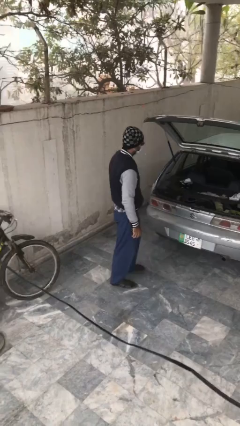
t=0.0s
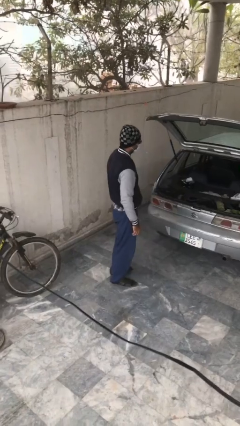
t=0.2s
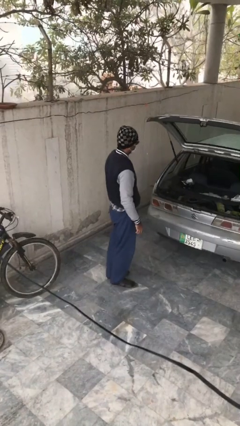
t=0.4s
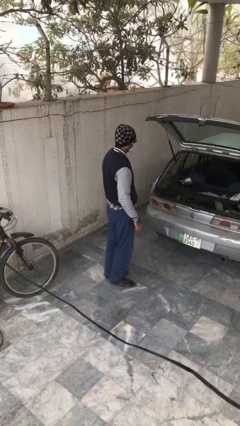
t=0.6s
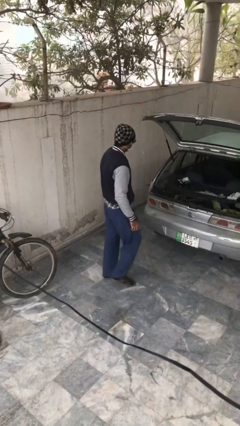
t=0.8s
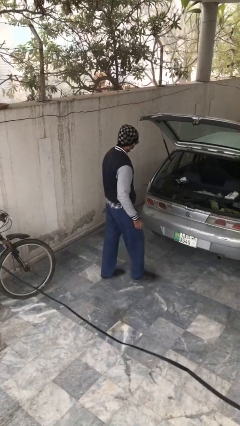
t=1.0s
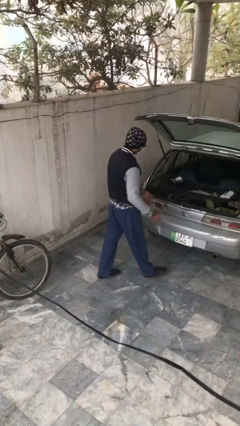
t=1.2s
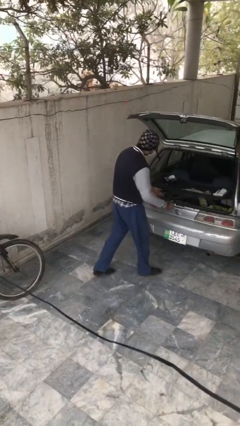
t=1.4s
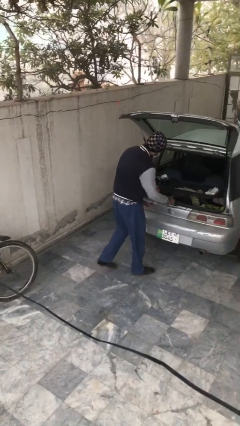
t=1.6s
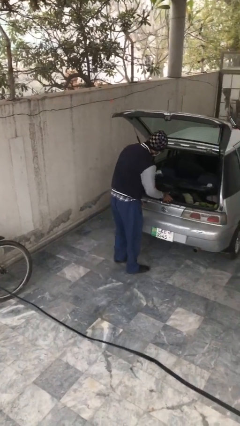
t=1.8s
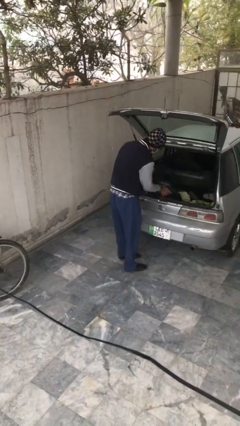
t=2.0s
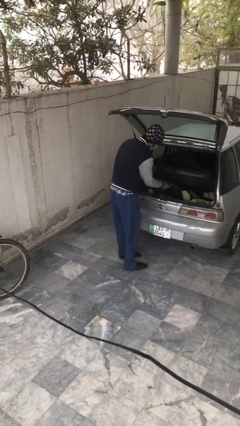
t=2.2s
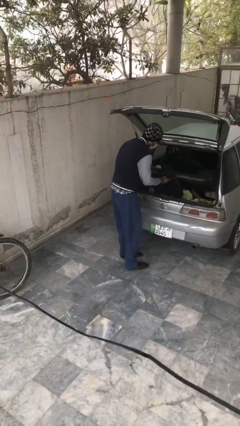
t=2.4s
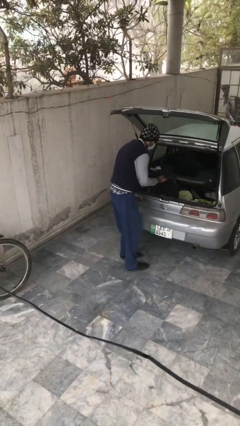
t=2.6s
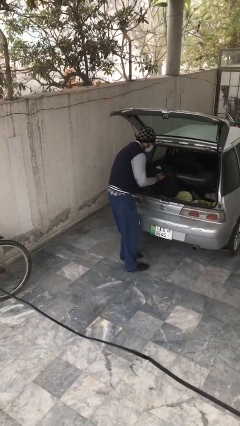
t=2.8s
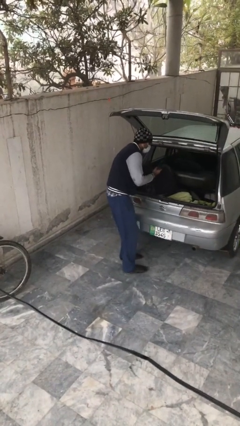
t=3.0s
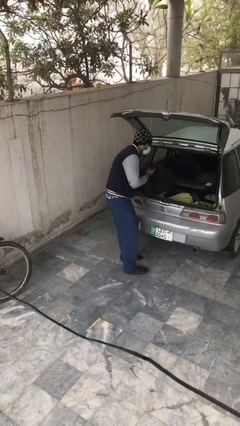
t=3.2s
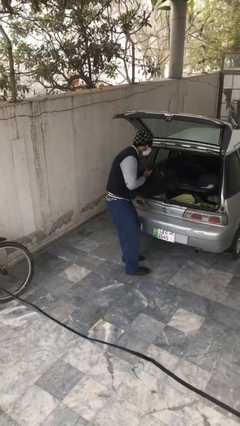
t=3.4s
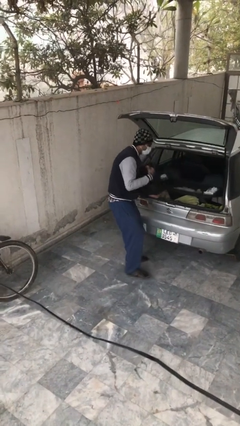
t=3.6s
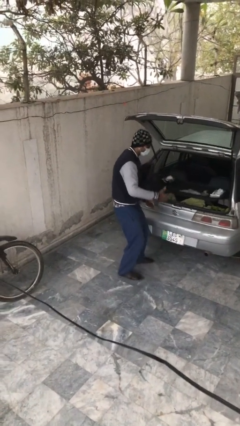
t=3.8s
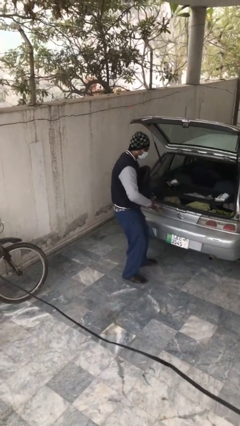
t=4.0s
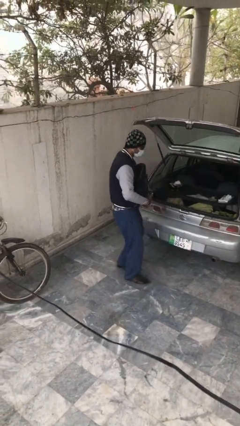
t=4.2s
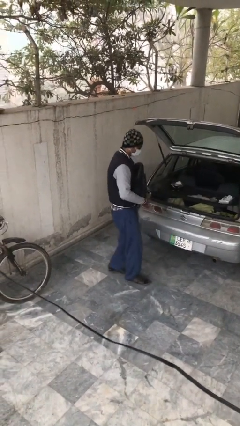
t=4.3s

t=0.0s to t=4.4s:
person unloads car

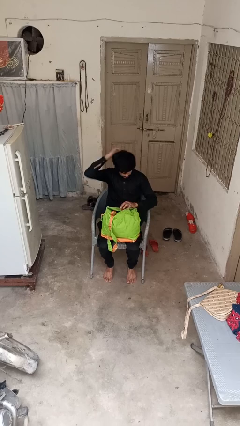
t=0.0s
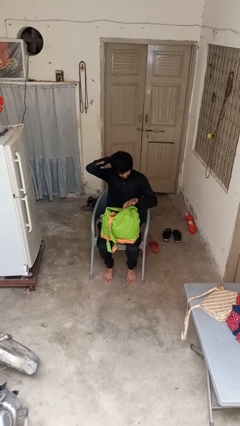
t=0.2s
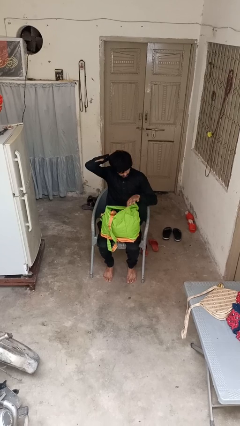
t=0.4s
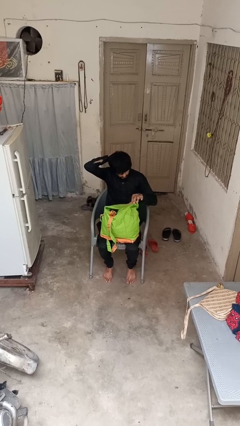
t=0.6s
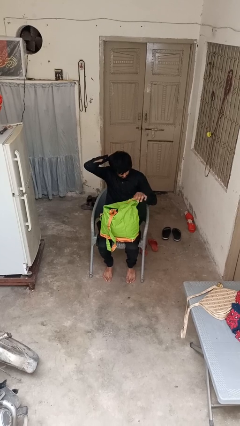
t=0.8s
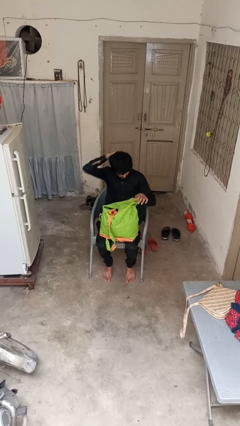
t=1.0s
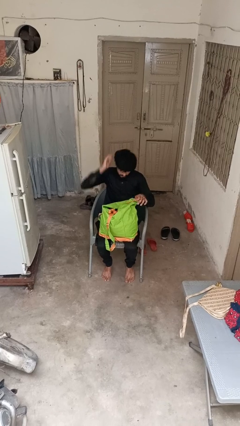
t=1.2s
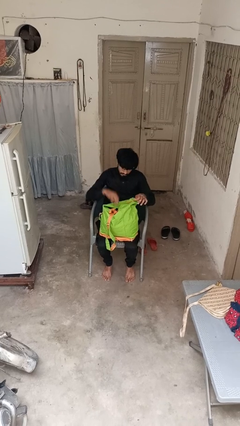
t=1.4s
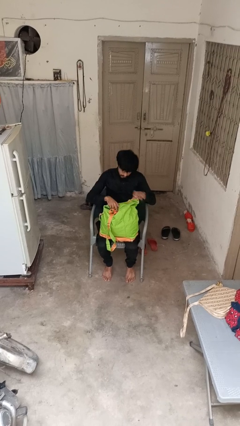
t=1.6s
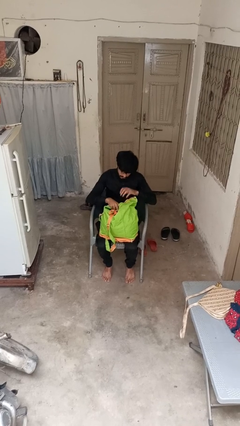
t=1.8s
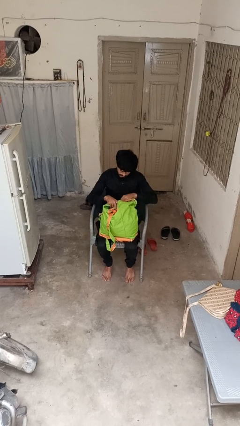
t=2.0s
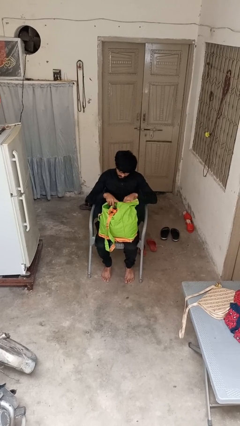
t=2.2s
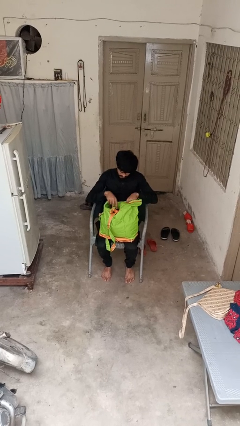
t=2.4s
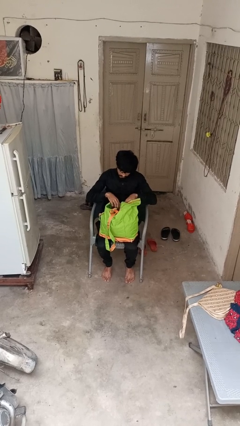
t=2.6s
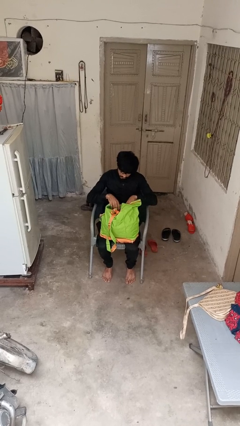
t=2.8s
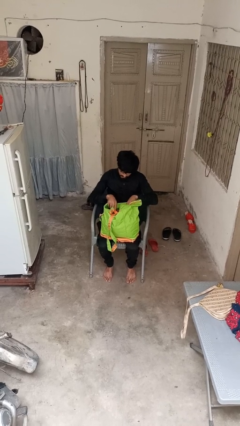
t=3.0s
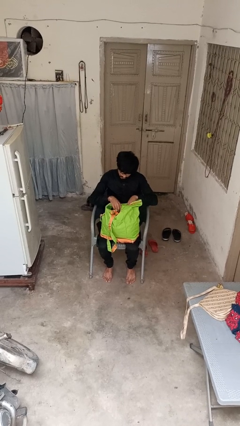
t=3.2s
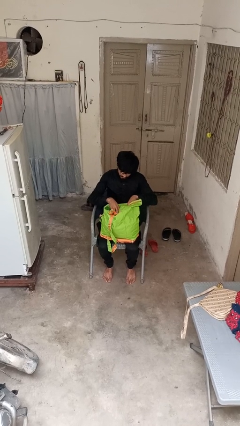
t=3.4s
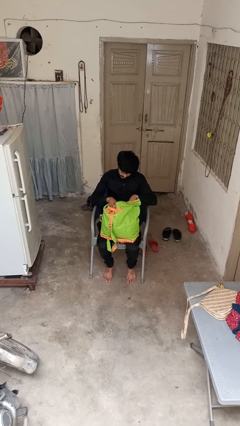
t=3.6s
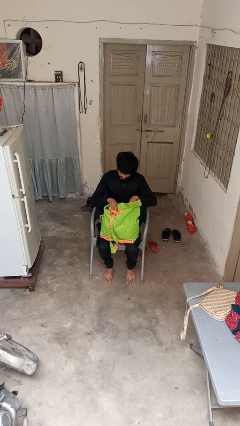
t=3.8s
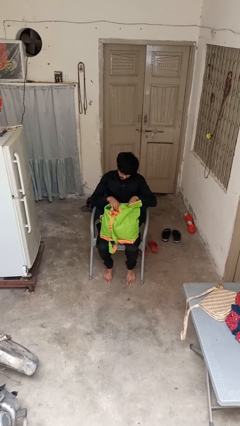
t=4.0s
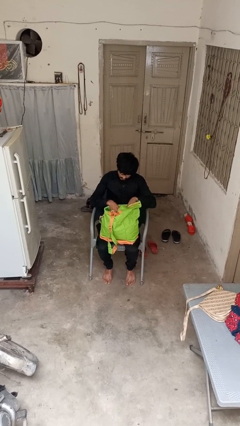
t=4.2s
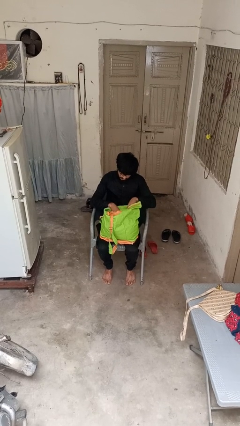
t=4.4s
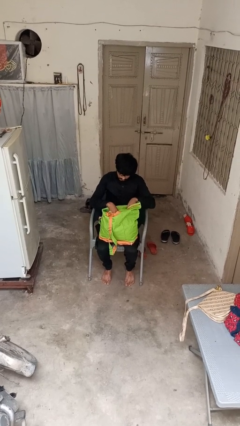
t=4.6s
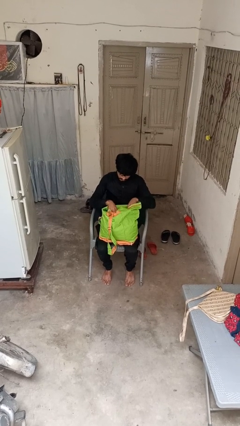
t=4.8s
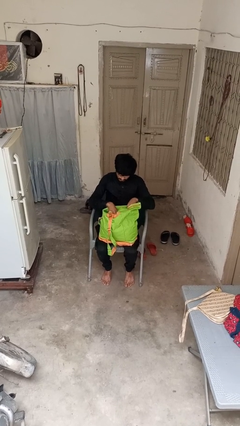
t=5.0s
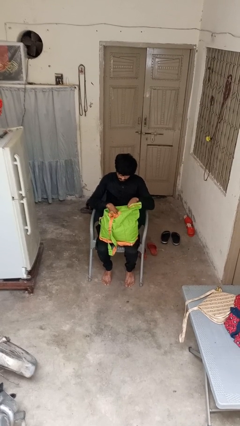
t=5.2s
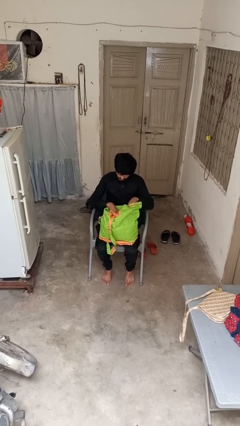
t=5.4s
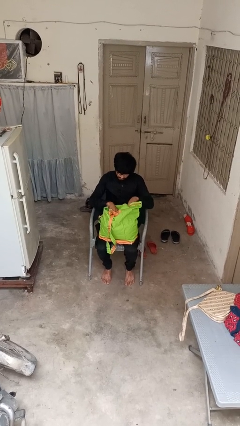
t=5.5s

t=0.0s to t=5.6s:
person searches in backpack

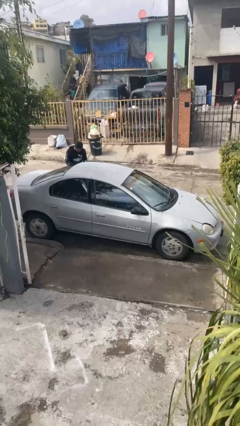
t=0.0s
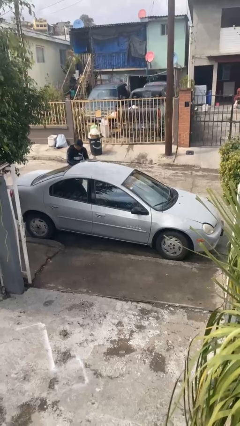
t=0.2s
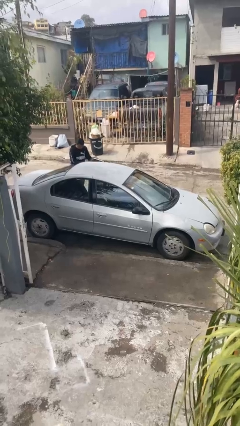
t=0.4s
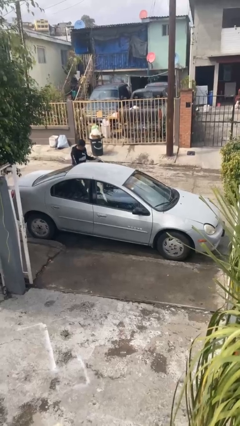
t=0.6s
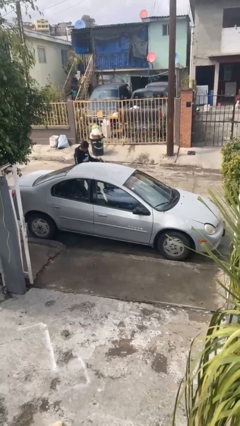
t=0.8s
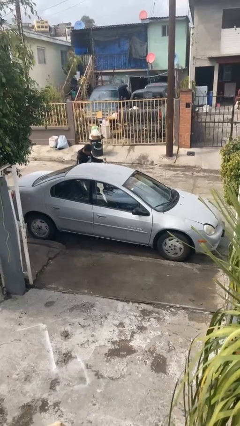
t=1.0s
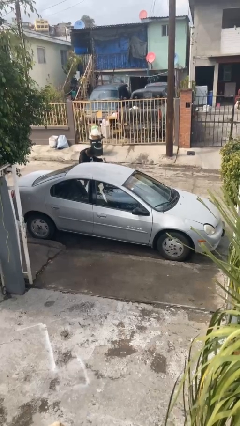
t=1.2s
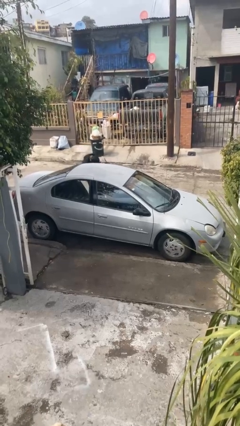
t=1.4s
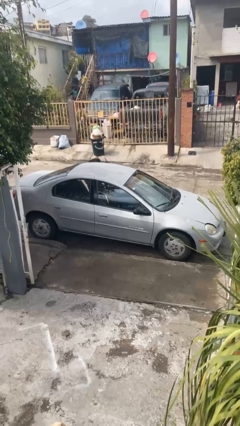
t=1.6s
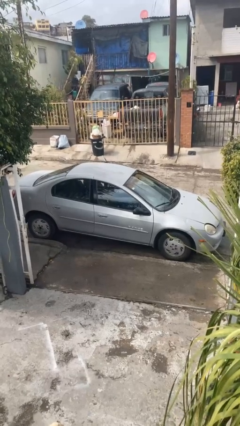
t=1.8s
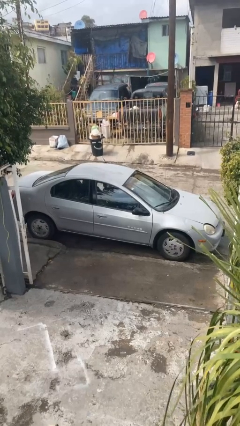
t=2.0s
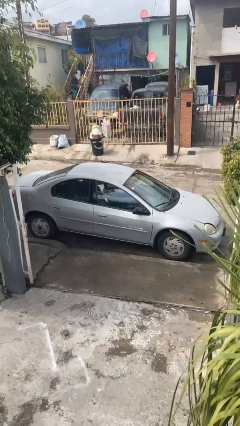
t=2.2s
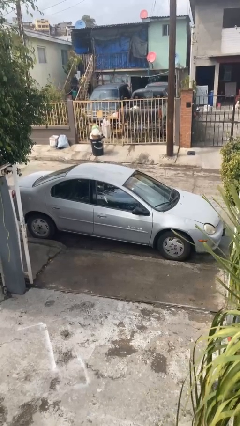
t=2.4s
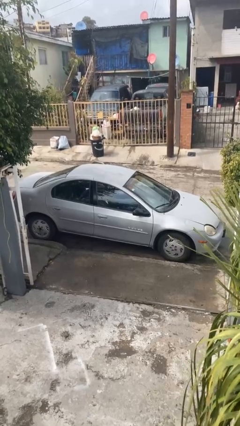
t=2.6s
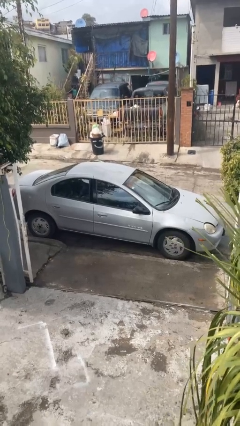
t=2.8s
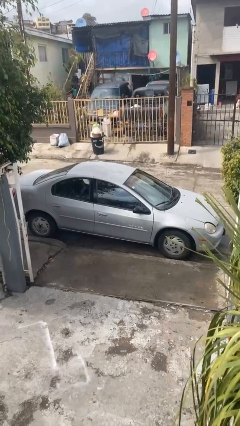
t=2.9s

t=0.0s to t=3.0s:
car picks up person

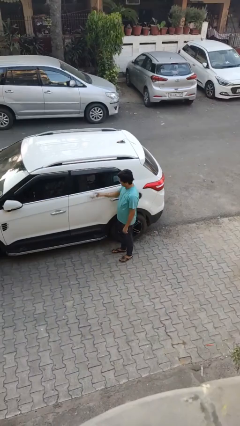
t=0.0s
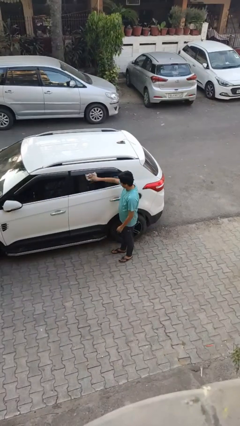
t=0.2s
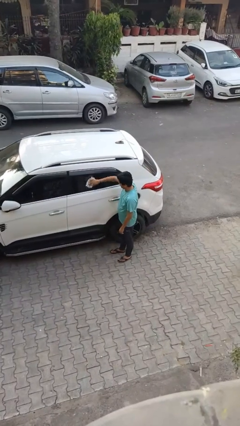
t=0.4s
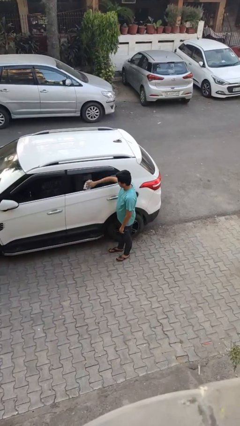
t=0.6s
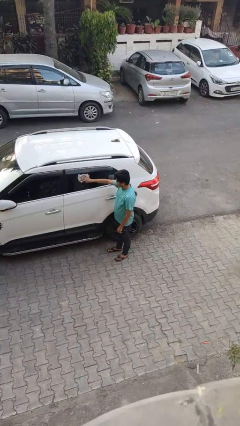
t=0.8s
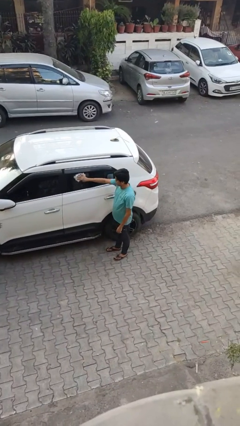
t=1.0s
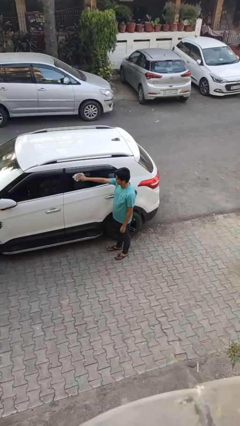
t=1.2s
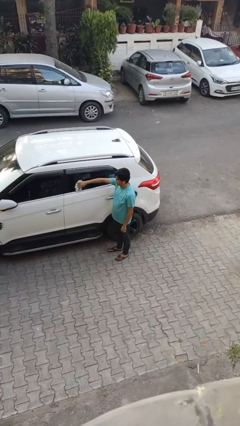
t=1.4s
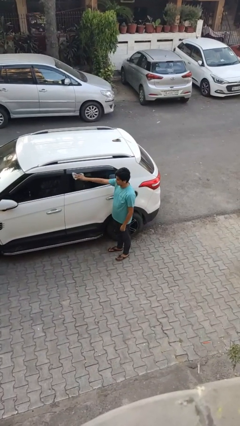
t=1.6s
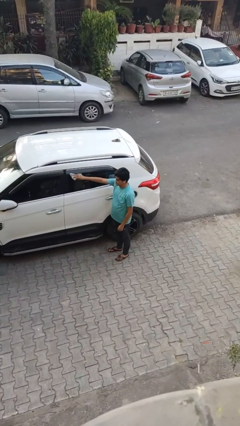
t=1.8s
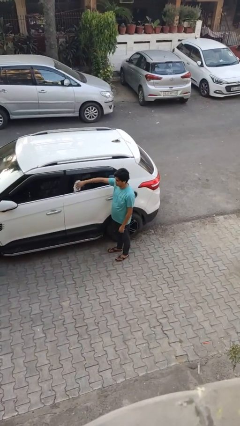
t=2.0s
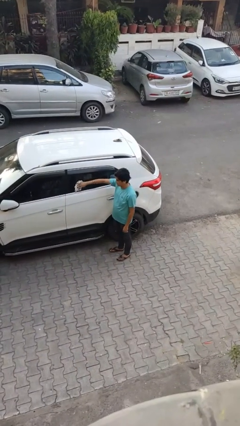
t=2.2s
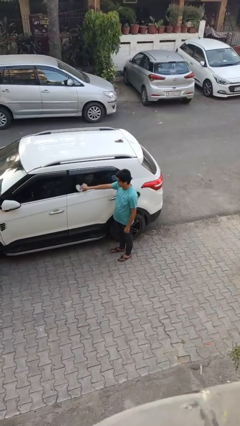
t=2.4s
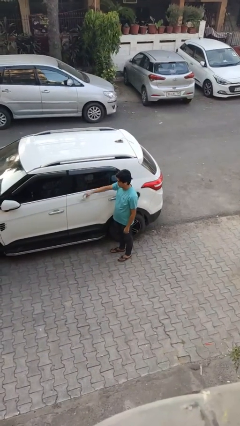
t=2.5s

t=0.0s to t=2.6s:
person polishes car with rag

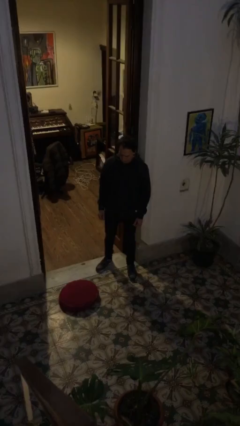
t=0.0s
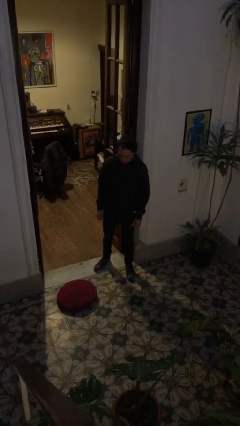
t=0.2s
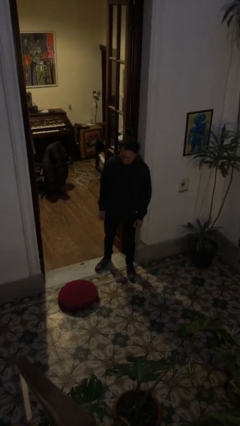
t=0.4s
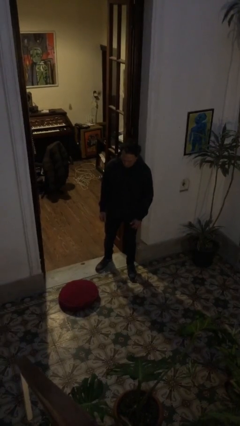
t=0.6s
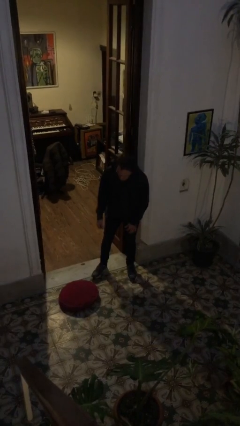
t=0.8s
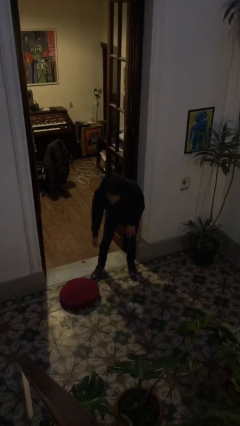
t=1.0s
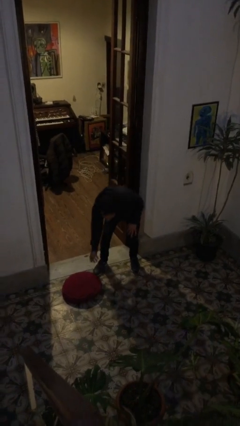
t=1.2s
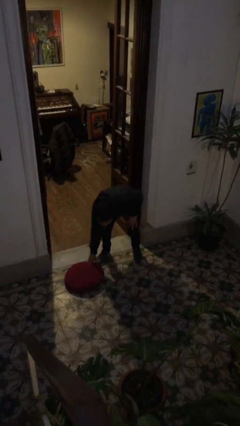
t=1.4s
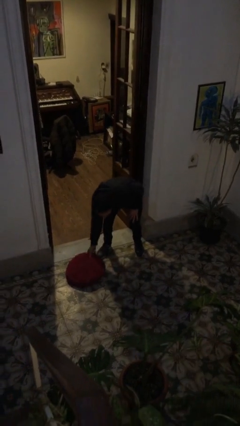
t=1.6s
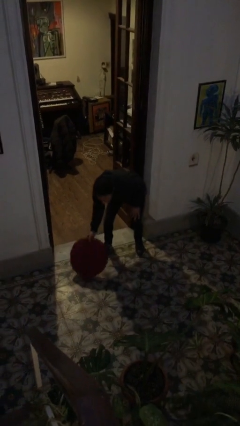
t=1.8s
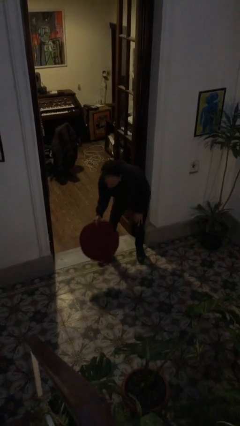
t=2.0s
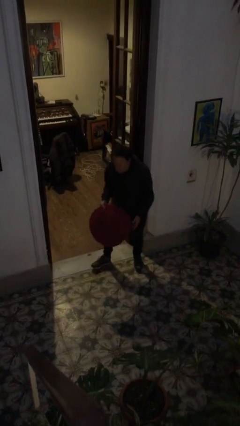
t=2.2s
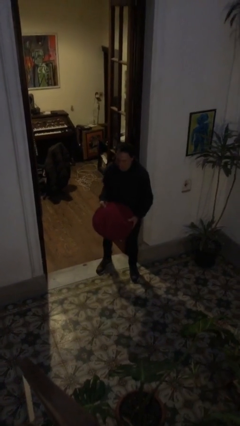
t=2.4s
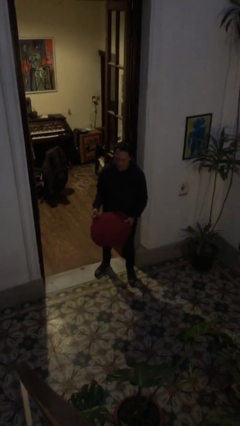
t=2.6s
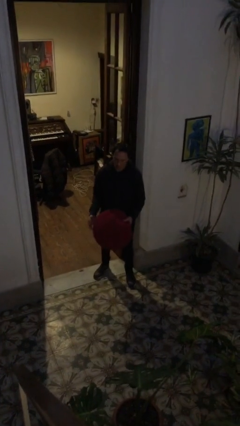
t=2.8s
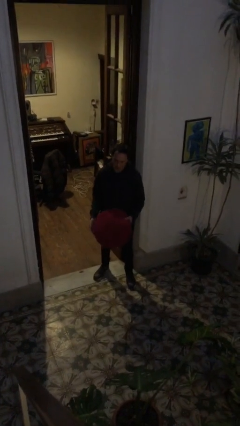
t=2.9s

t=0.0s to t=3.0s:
person picks up object from floor
